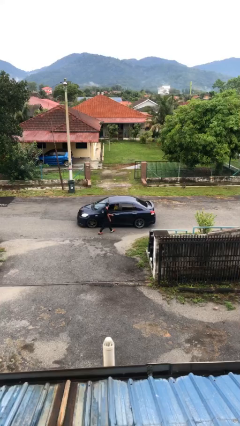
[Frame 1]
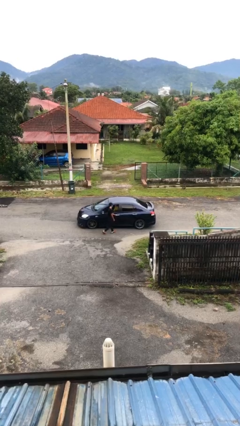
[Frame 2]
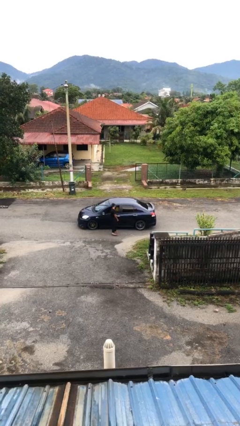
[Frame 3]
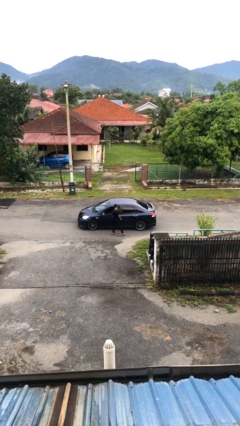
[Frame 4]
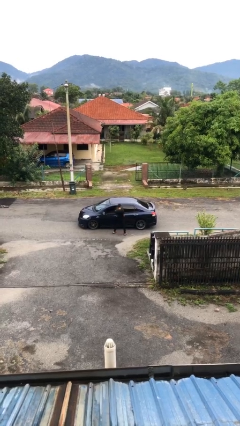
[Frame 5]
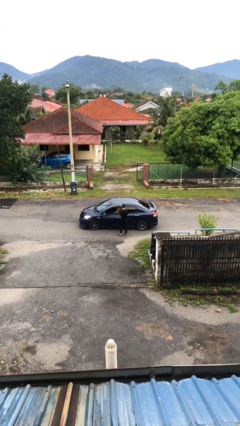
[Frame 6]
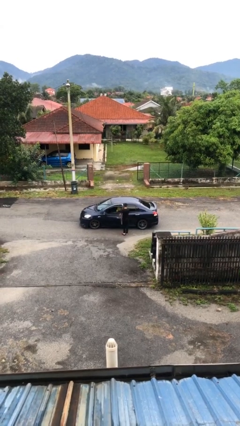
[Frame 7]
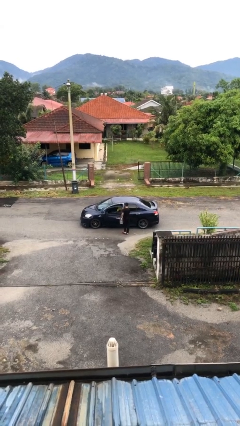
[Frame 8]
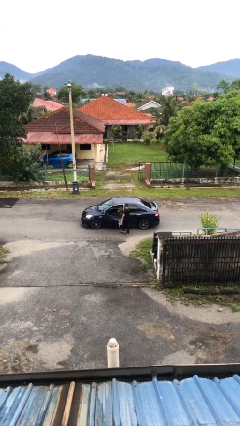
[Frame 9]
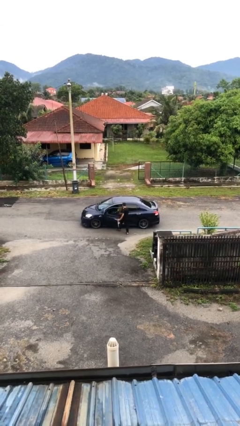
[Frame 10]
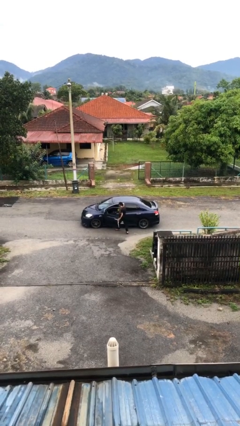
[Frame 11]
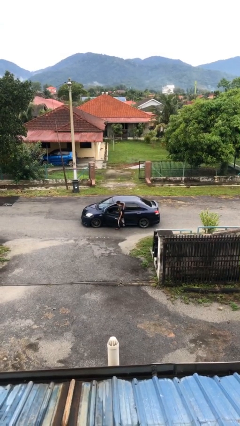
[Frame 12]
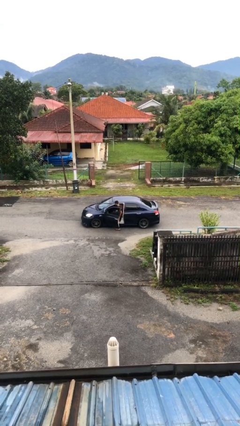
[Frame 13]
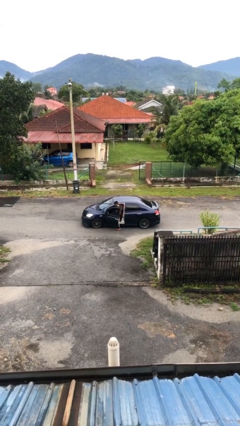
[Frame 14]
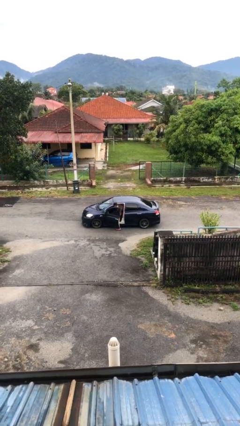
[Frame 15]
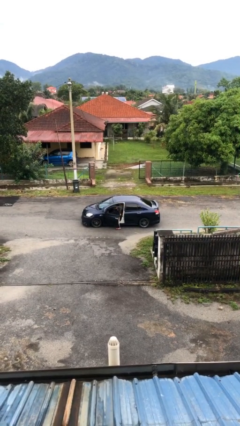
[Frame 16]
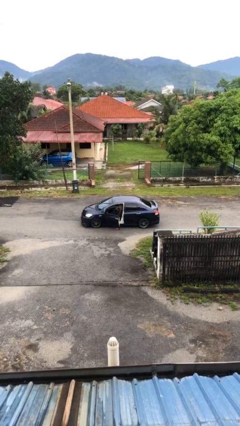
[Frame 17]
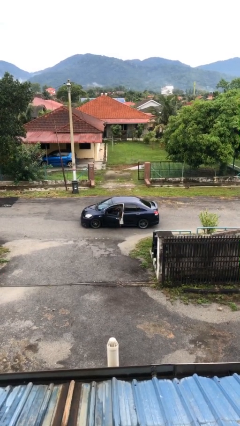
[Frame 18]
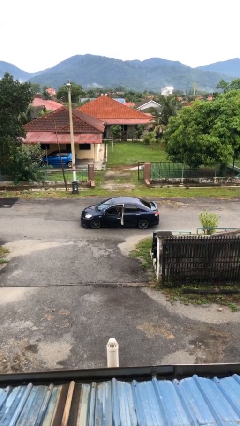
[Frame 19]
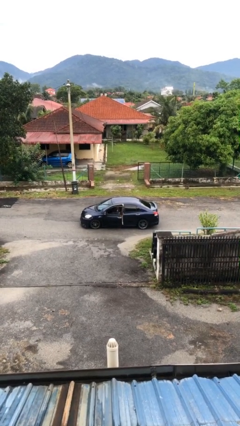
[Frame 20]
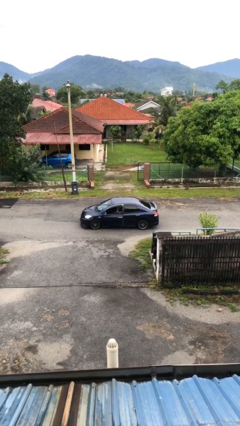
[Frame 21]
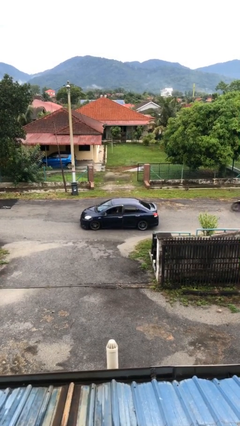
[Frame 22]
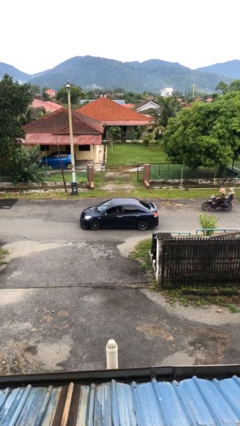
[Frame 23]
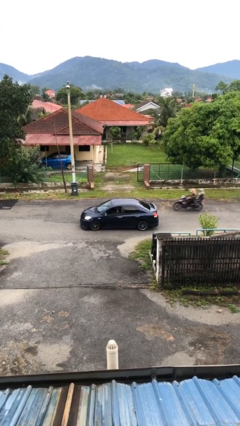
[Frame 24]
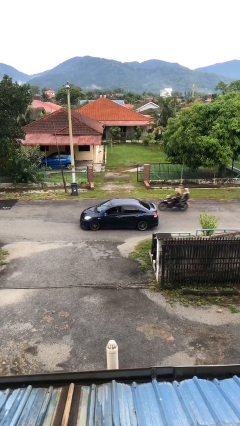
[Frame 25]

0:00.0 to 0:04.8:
car picks up person

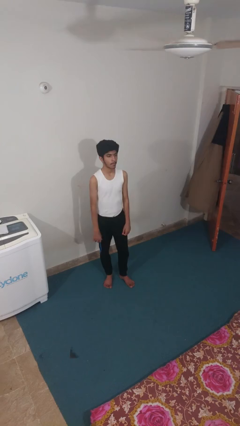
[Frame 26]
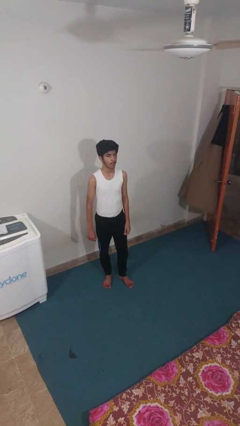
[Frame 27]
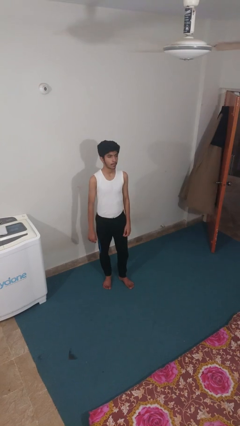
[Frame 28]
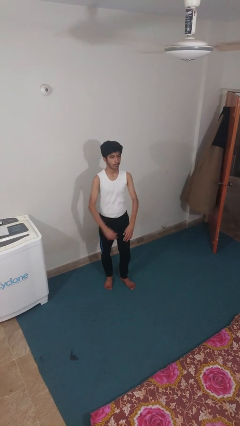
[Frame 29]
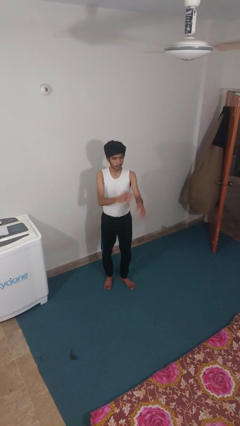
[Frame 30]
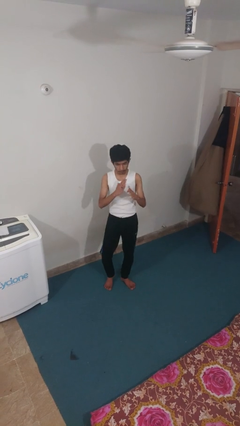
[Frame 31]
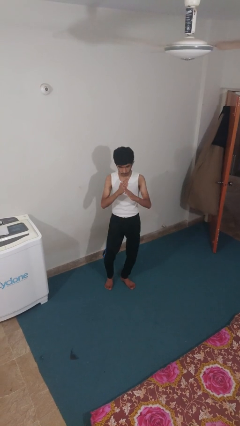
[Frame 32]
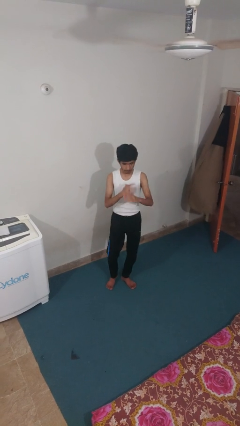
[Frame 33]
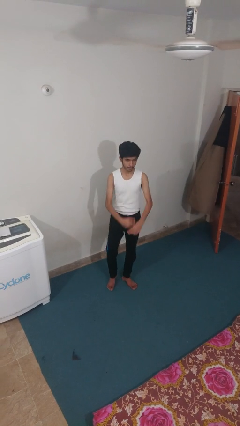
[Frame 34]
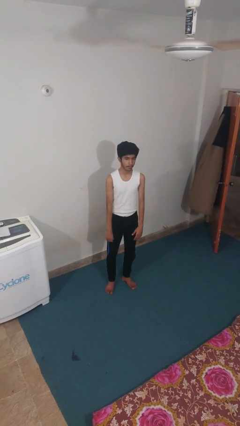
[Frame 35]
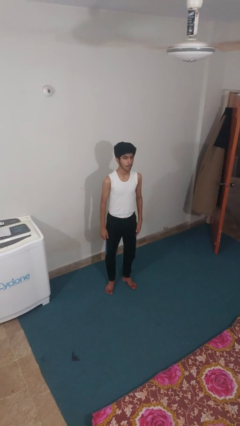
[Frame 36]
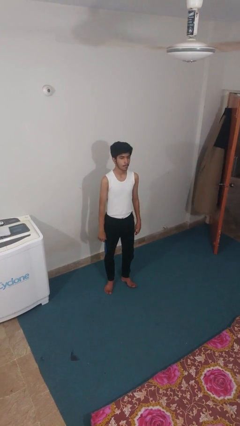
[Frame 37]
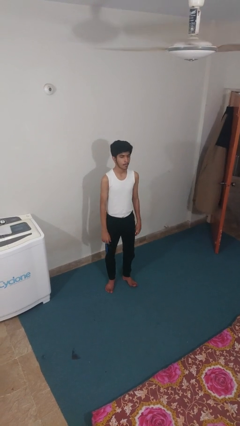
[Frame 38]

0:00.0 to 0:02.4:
person karate chop

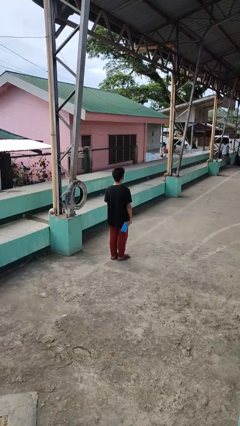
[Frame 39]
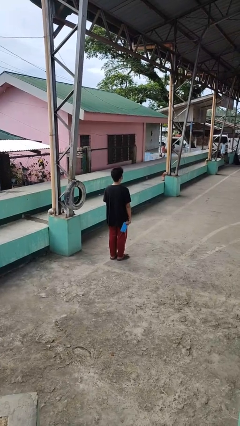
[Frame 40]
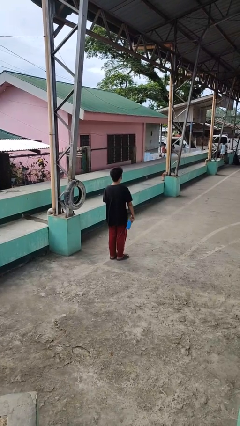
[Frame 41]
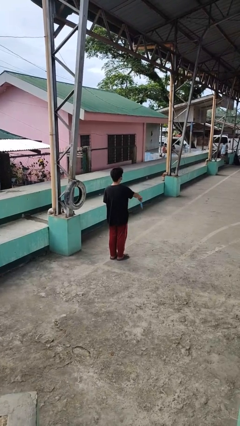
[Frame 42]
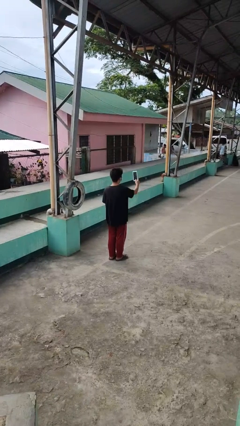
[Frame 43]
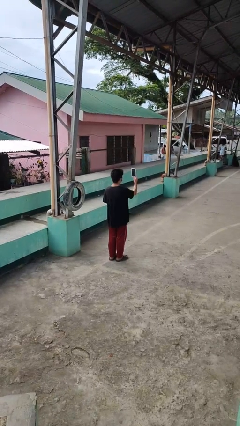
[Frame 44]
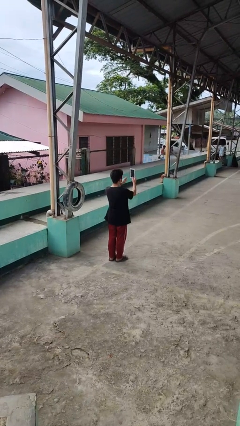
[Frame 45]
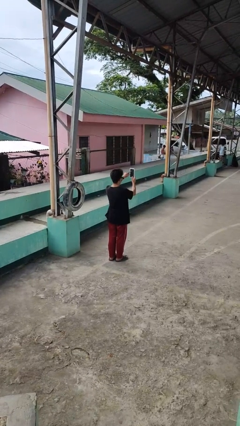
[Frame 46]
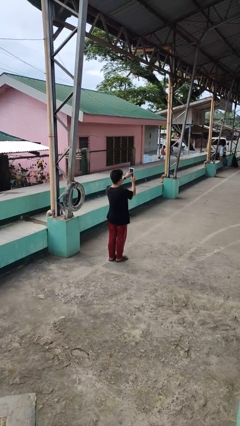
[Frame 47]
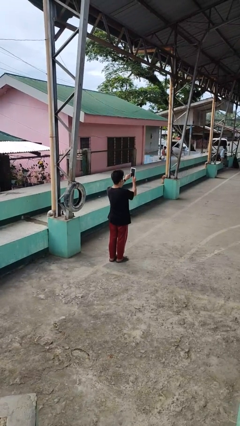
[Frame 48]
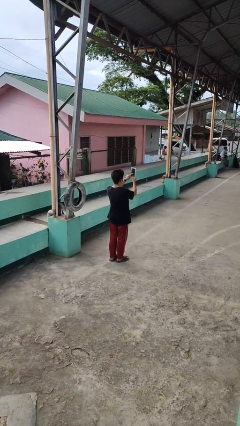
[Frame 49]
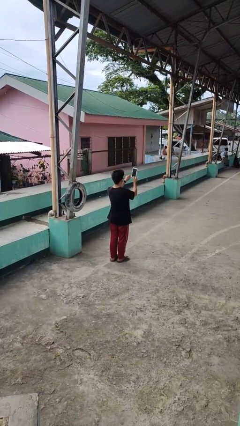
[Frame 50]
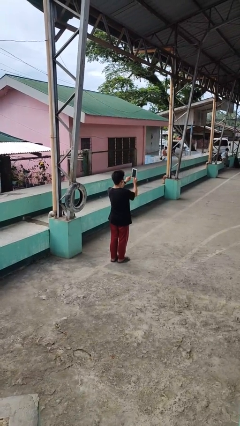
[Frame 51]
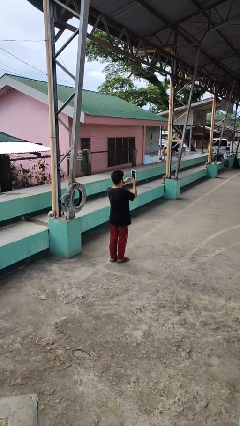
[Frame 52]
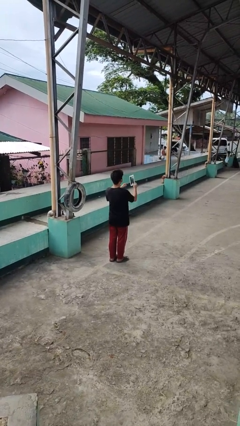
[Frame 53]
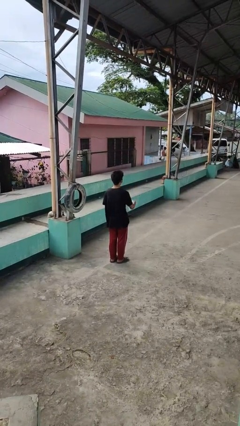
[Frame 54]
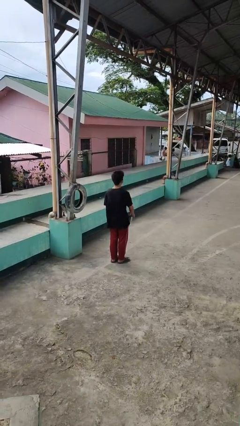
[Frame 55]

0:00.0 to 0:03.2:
person interacts with tablet

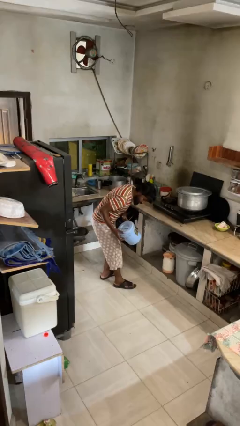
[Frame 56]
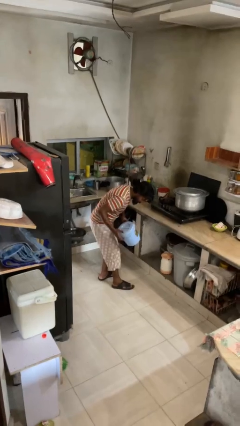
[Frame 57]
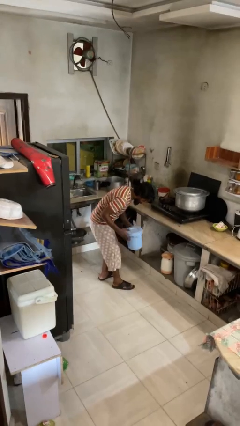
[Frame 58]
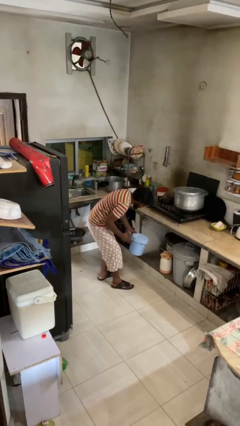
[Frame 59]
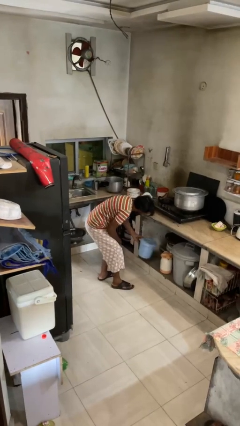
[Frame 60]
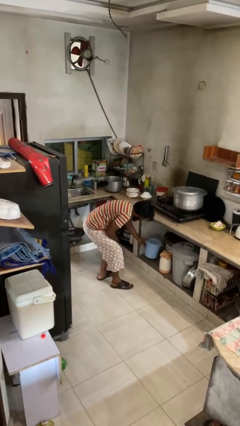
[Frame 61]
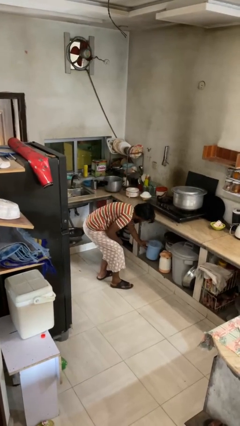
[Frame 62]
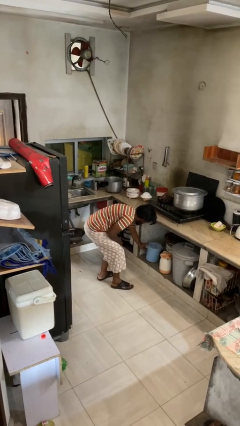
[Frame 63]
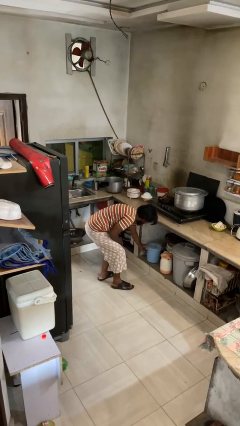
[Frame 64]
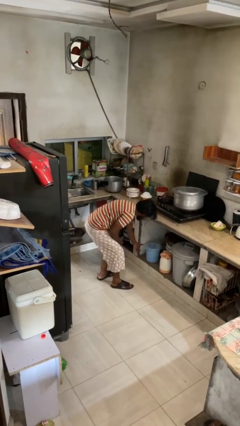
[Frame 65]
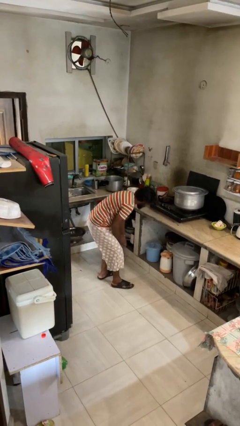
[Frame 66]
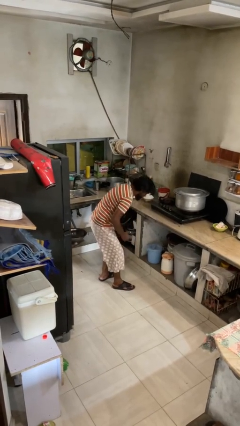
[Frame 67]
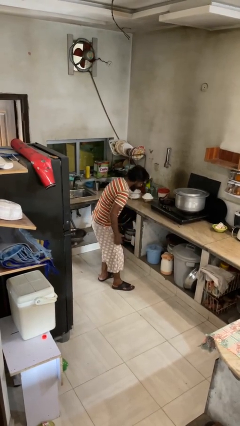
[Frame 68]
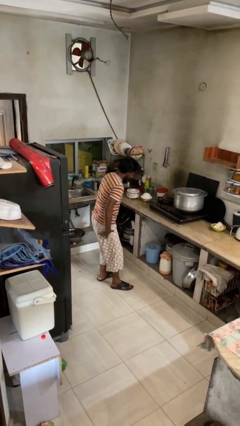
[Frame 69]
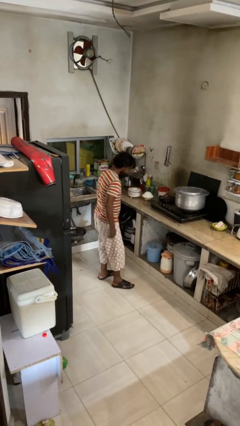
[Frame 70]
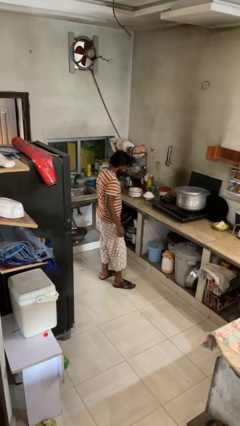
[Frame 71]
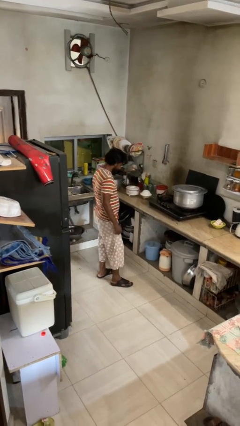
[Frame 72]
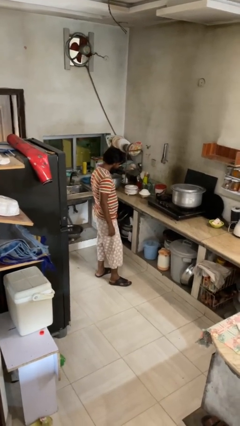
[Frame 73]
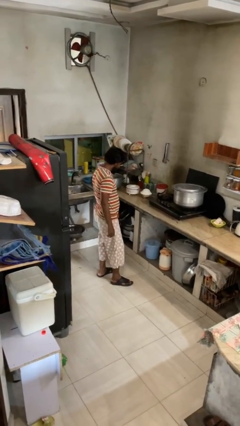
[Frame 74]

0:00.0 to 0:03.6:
person puts down object into cabinet

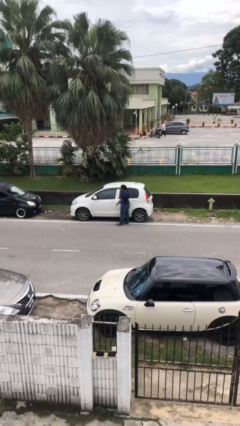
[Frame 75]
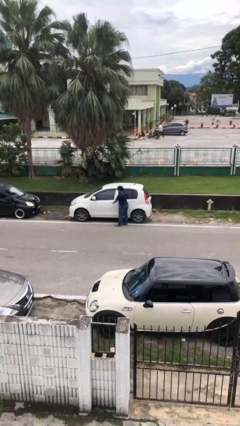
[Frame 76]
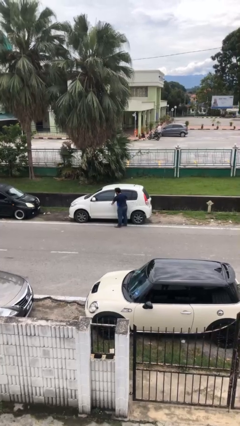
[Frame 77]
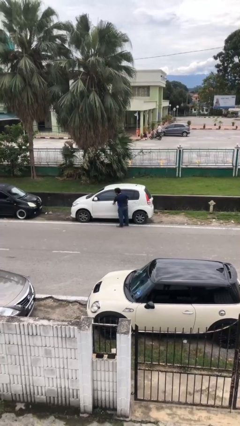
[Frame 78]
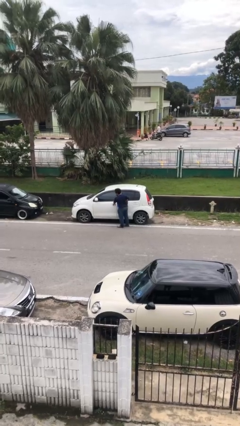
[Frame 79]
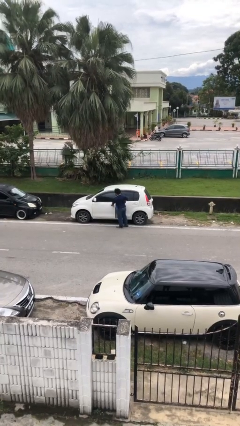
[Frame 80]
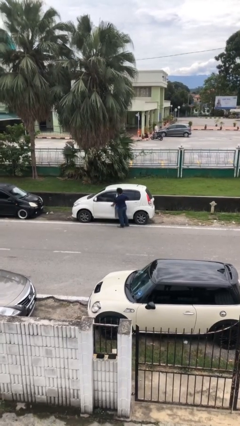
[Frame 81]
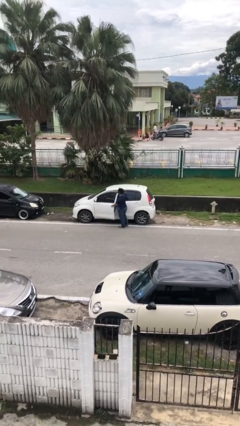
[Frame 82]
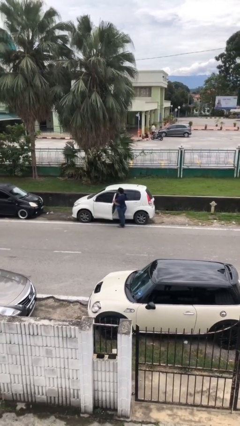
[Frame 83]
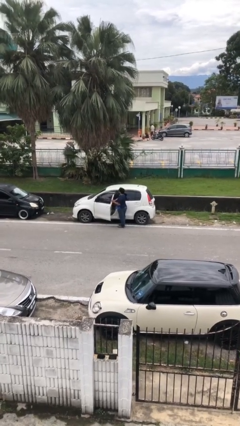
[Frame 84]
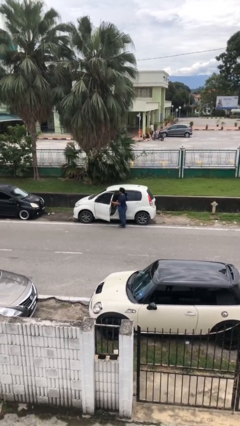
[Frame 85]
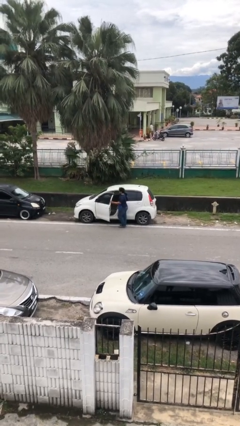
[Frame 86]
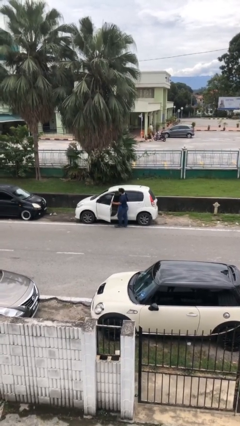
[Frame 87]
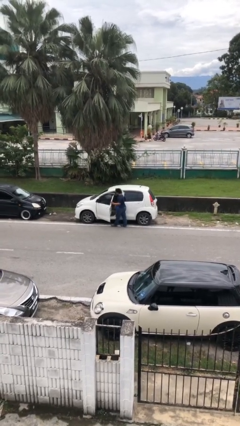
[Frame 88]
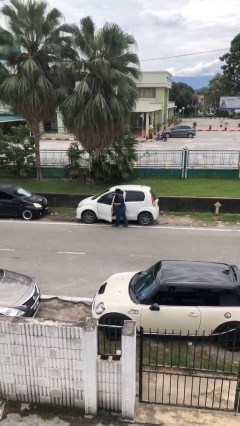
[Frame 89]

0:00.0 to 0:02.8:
person opens car door

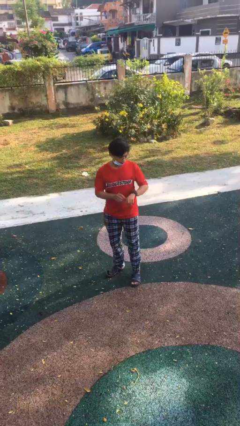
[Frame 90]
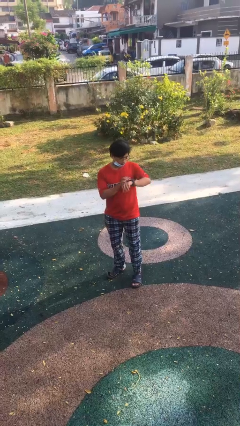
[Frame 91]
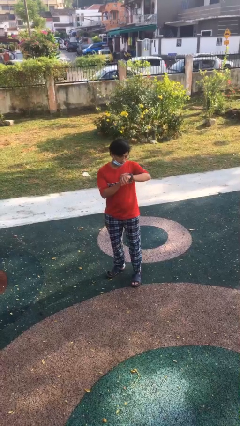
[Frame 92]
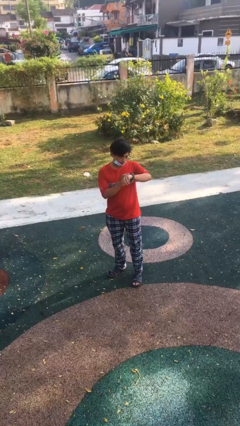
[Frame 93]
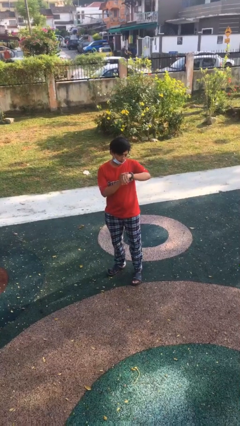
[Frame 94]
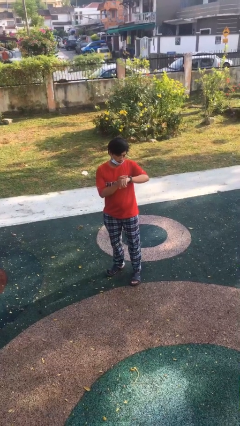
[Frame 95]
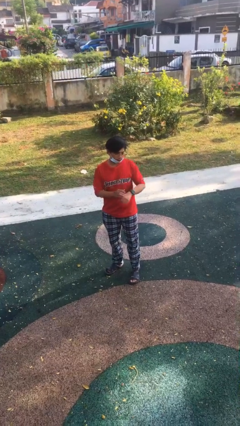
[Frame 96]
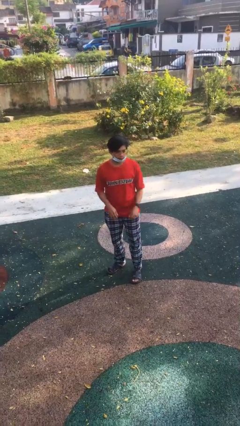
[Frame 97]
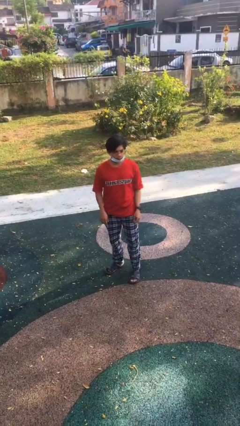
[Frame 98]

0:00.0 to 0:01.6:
person looks at wristwatch
